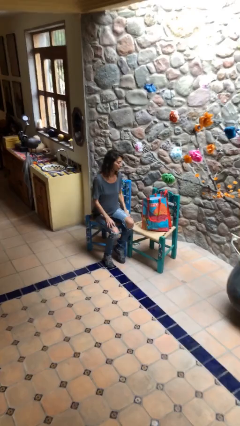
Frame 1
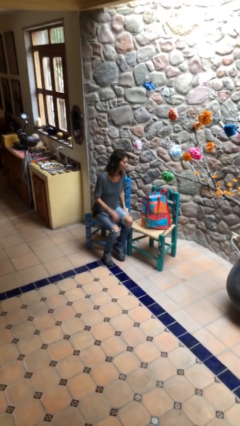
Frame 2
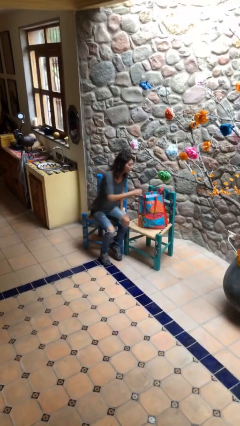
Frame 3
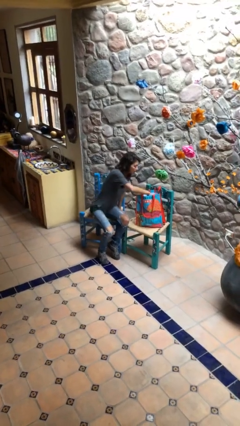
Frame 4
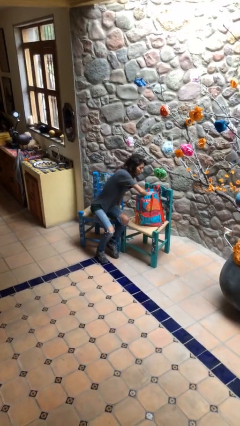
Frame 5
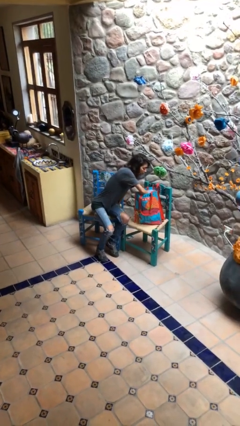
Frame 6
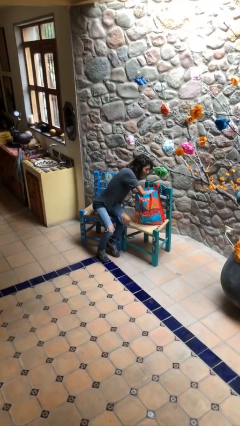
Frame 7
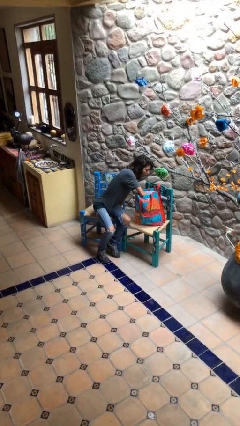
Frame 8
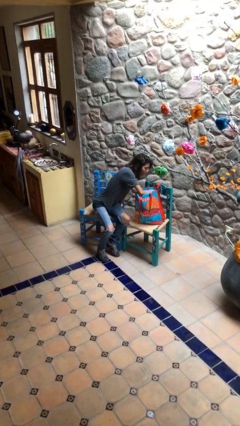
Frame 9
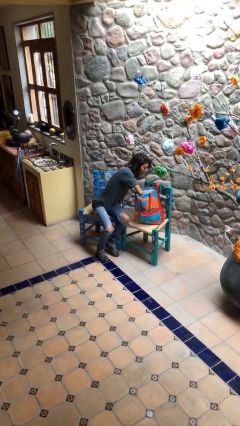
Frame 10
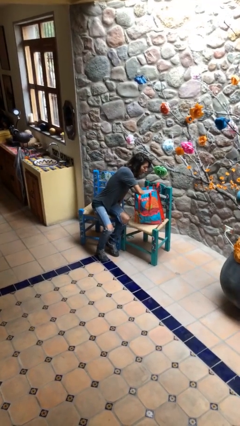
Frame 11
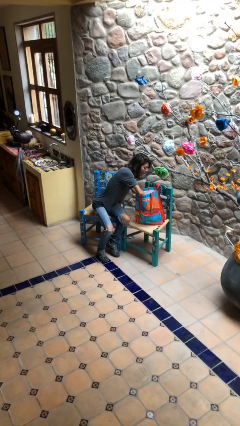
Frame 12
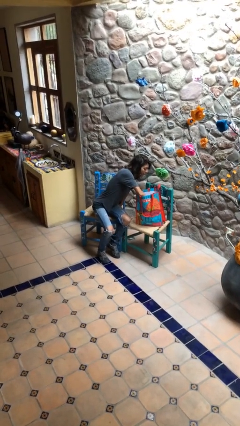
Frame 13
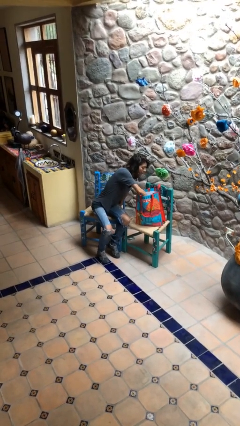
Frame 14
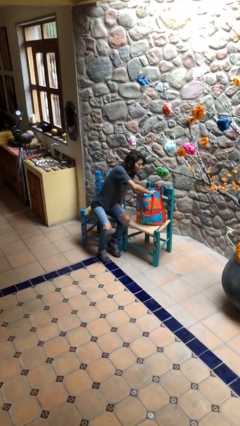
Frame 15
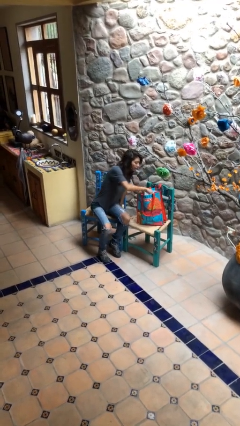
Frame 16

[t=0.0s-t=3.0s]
person searches in bag

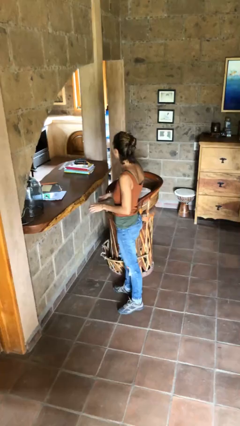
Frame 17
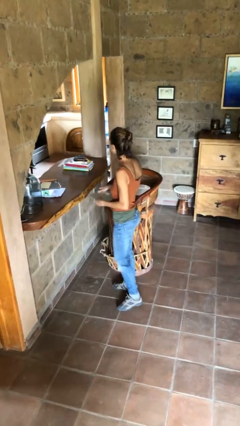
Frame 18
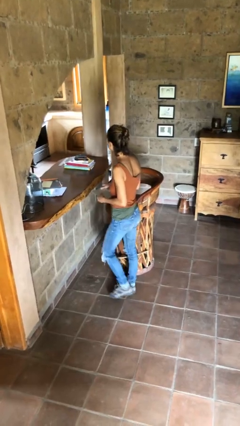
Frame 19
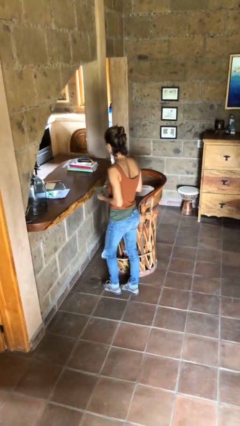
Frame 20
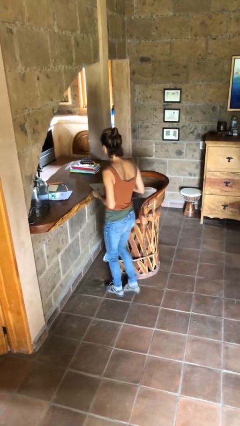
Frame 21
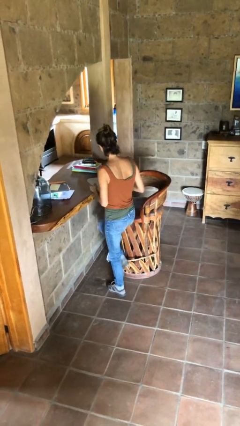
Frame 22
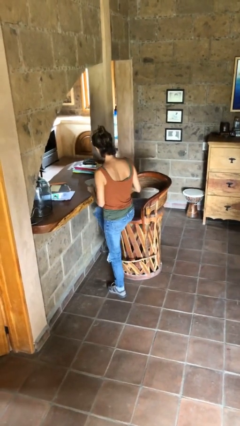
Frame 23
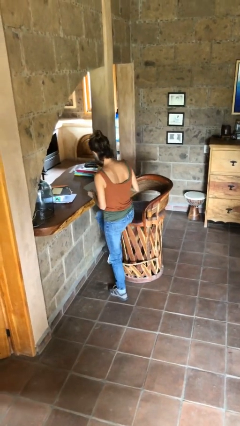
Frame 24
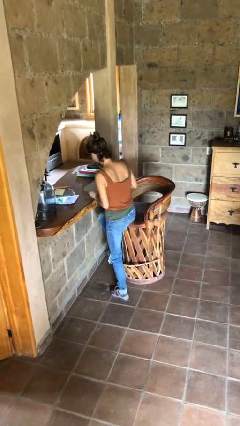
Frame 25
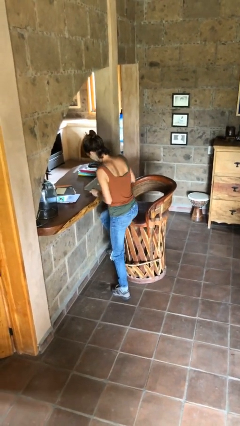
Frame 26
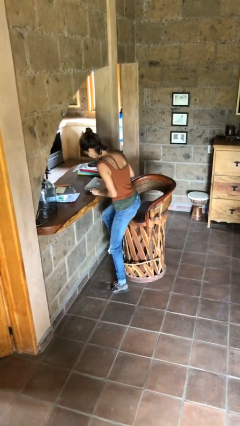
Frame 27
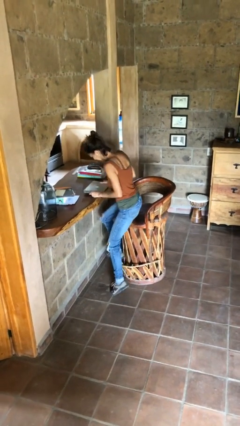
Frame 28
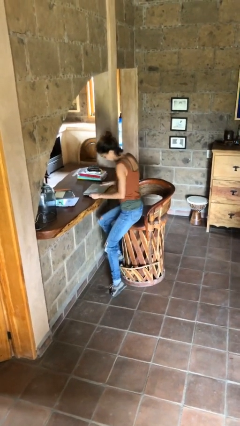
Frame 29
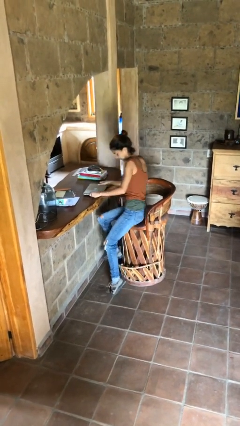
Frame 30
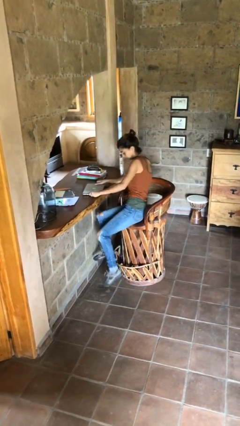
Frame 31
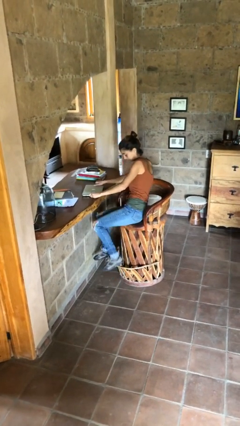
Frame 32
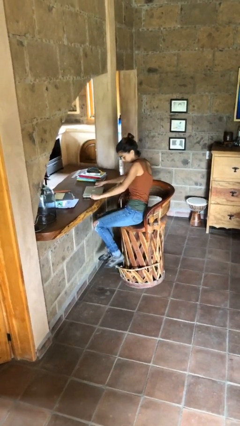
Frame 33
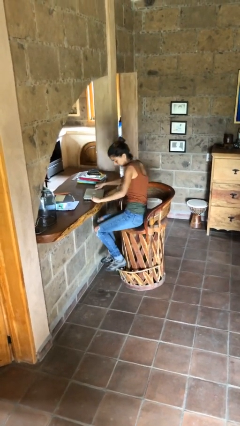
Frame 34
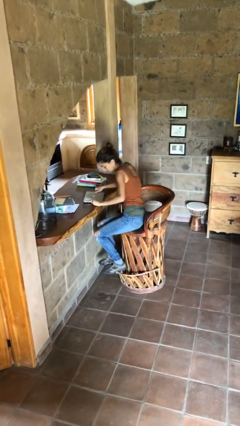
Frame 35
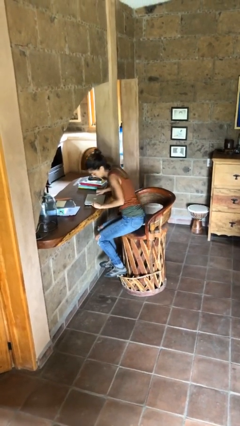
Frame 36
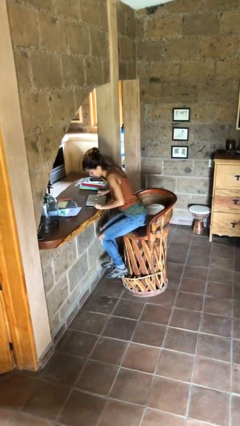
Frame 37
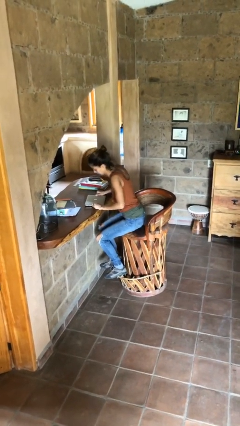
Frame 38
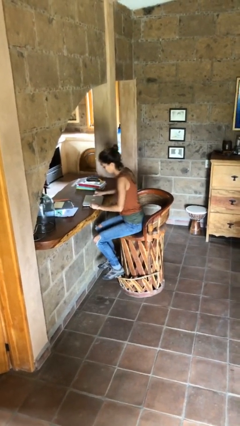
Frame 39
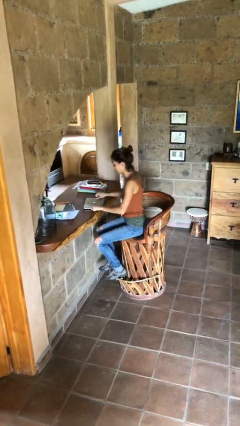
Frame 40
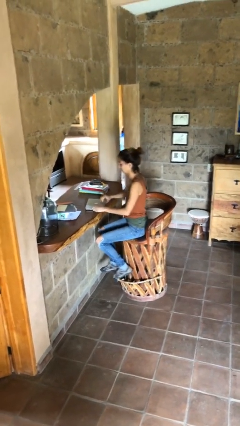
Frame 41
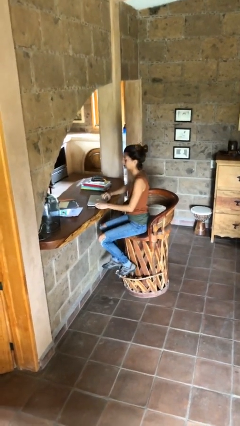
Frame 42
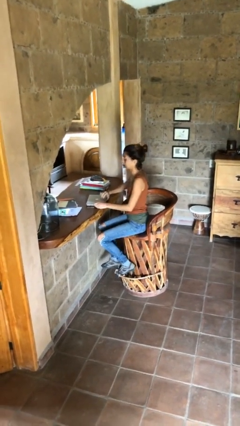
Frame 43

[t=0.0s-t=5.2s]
person sits down

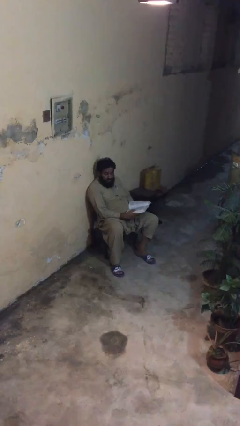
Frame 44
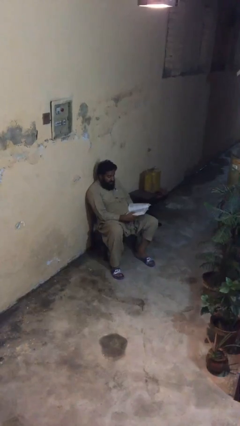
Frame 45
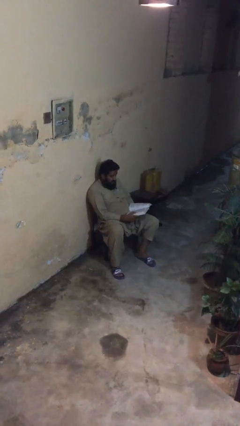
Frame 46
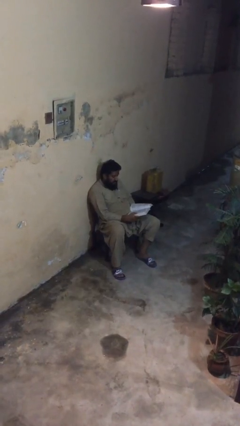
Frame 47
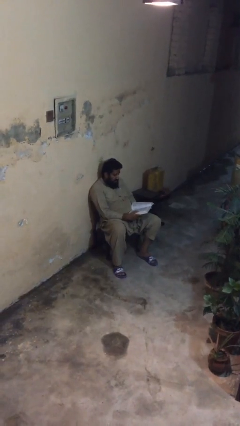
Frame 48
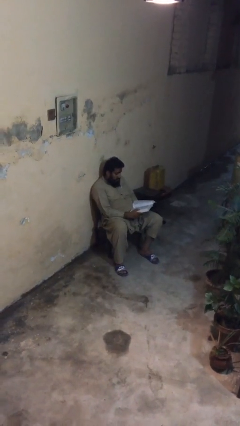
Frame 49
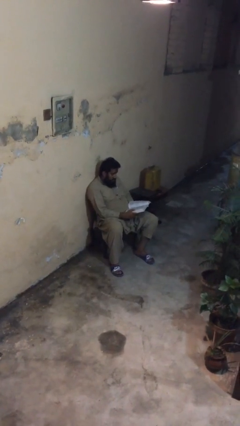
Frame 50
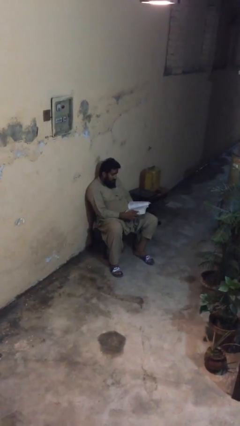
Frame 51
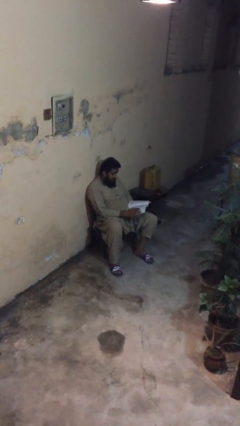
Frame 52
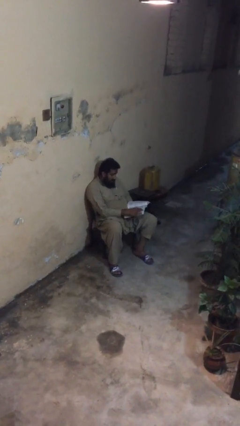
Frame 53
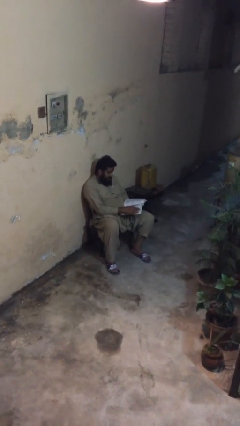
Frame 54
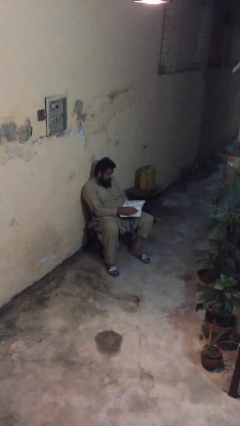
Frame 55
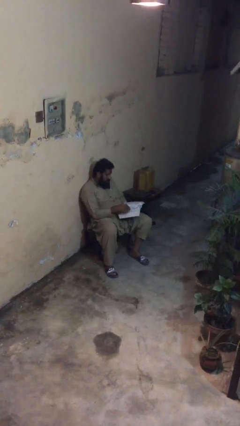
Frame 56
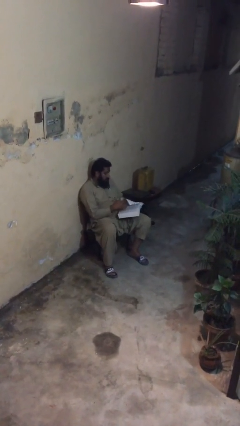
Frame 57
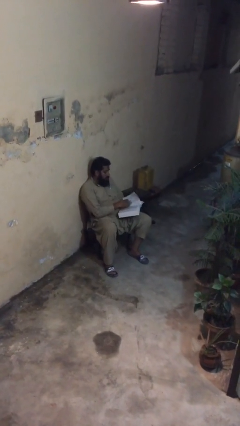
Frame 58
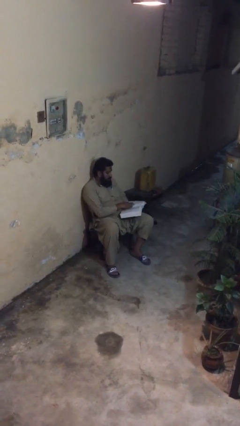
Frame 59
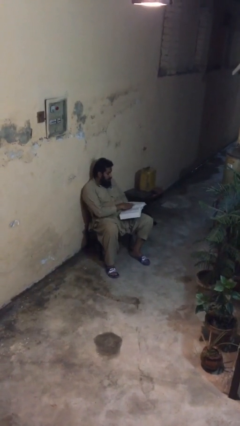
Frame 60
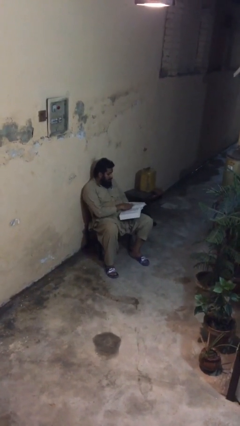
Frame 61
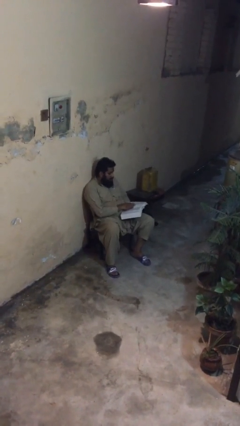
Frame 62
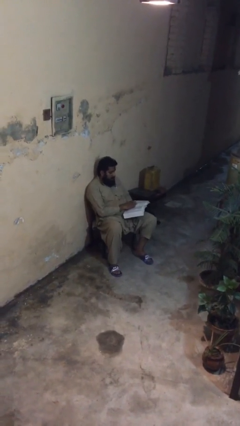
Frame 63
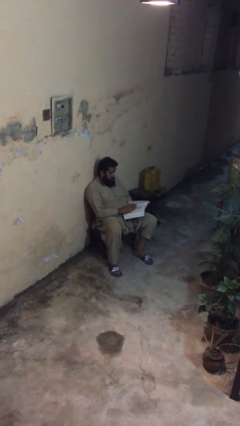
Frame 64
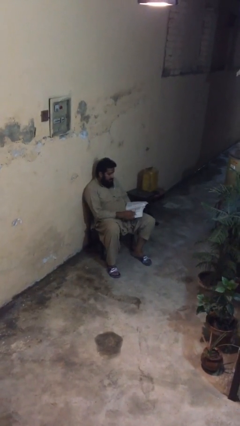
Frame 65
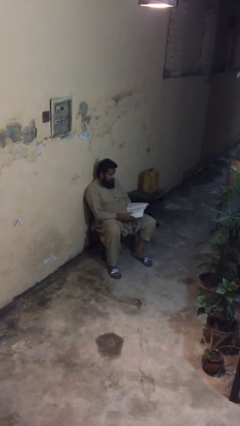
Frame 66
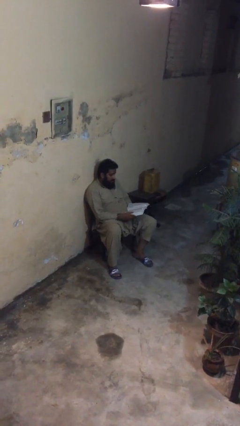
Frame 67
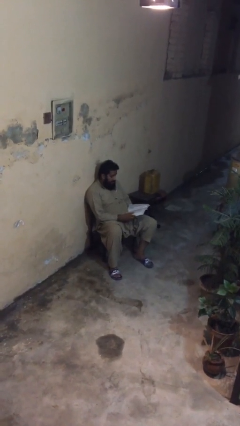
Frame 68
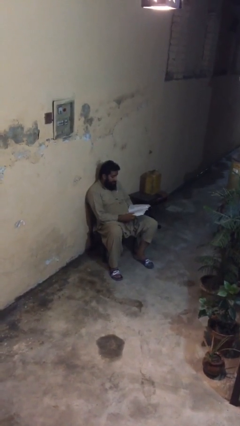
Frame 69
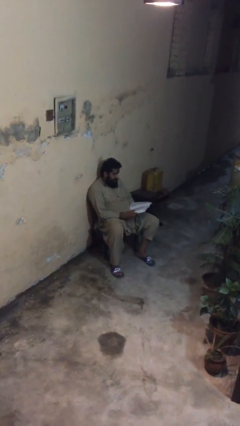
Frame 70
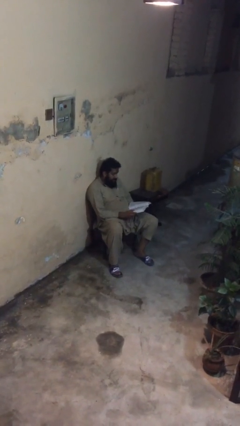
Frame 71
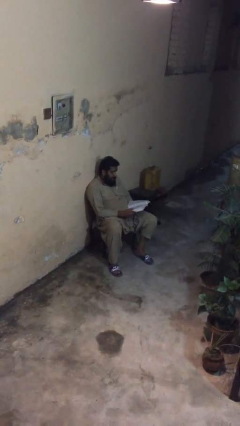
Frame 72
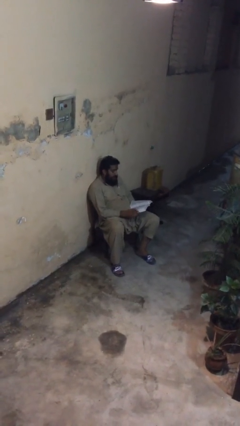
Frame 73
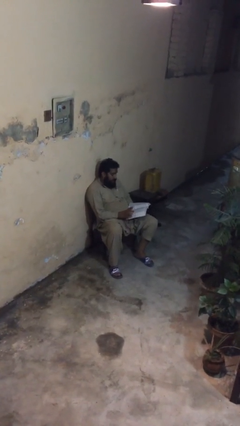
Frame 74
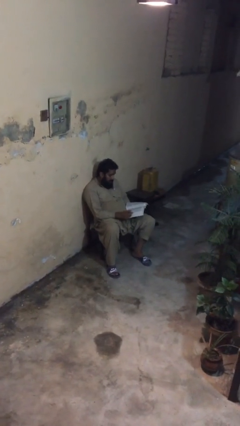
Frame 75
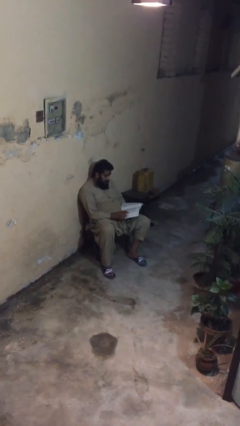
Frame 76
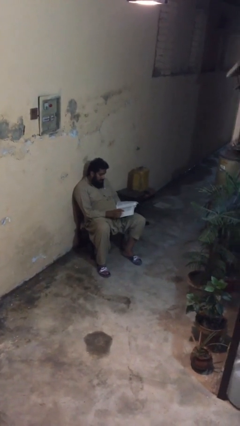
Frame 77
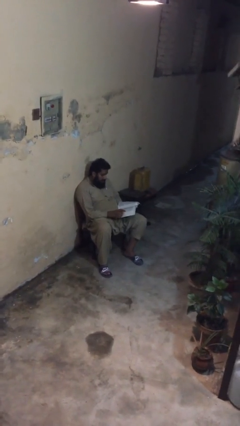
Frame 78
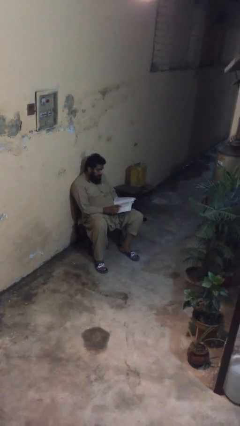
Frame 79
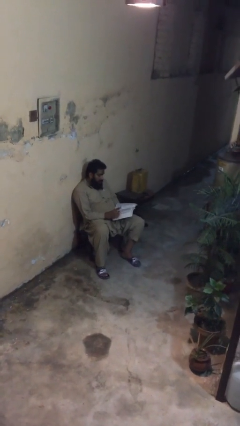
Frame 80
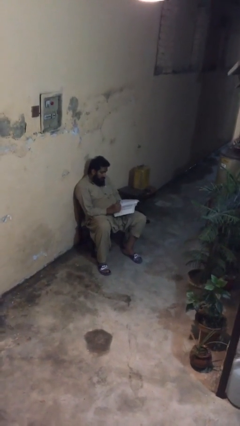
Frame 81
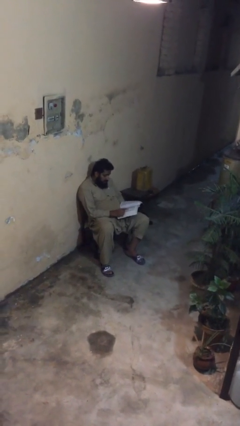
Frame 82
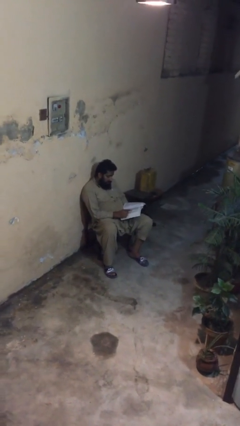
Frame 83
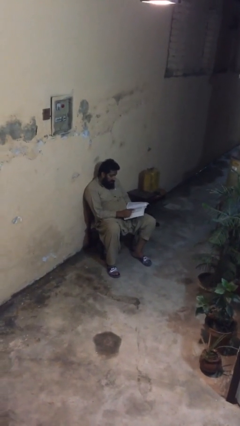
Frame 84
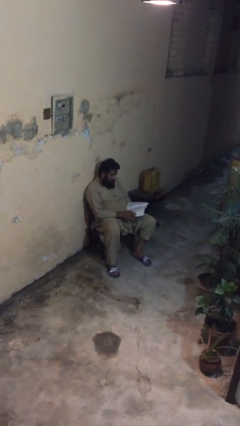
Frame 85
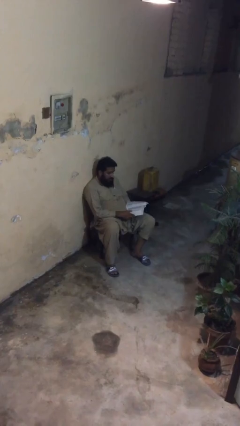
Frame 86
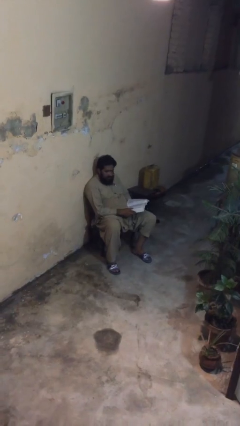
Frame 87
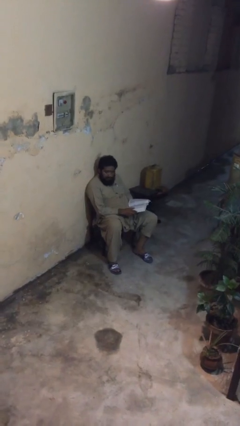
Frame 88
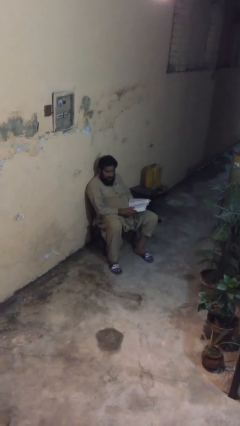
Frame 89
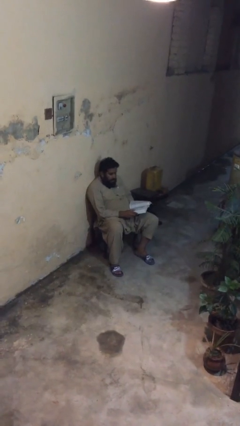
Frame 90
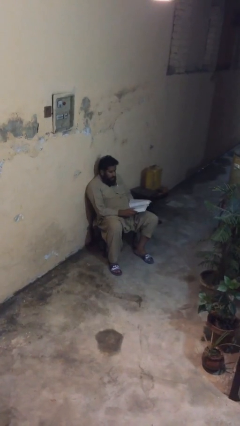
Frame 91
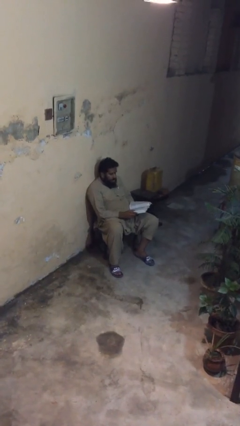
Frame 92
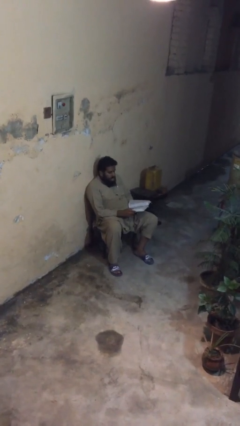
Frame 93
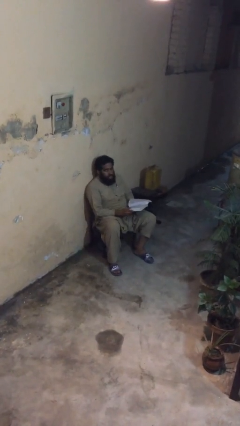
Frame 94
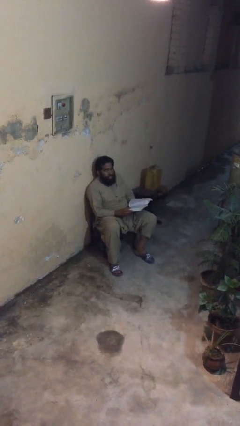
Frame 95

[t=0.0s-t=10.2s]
person reads document
